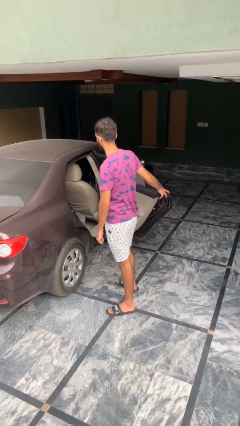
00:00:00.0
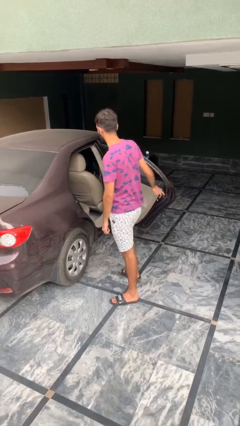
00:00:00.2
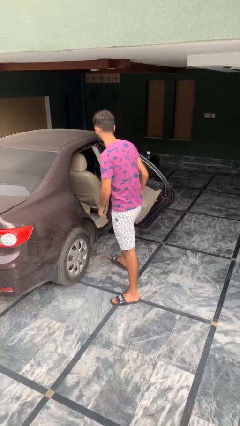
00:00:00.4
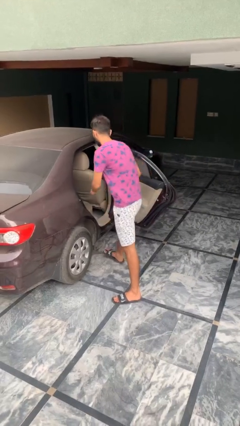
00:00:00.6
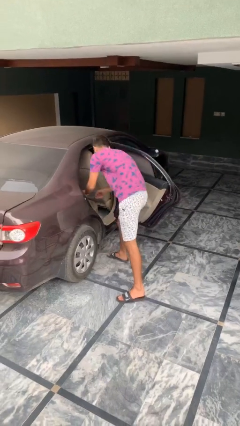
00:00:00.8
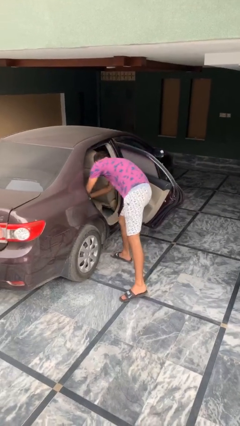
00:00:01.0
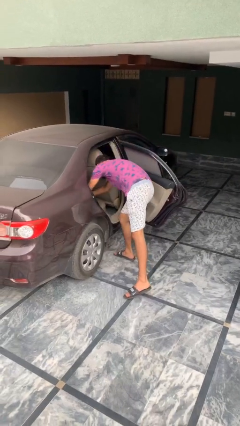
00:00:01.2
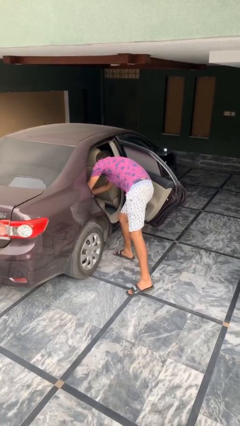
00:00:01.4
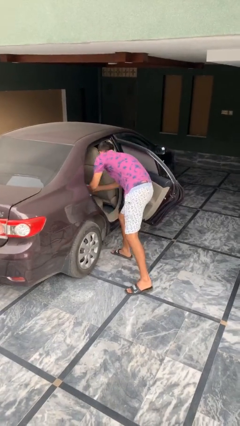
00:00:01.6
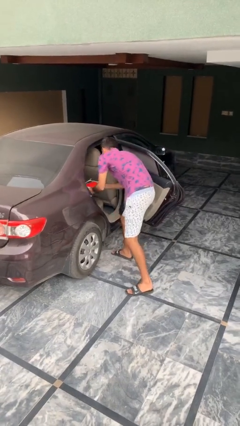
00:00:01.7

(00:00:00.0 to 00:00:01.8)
person unloads car

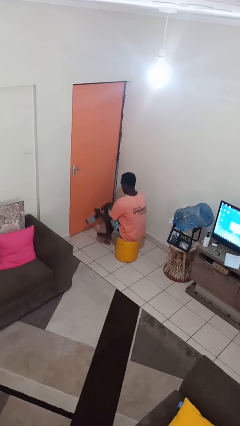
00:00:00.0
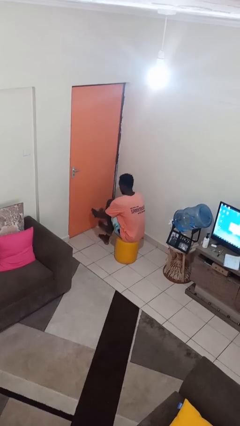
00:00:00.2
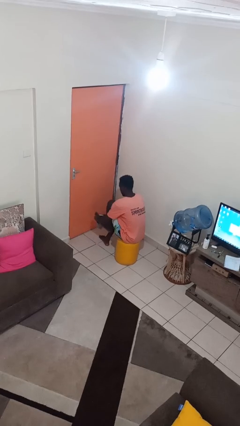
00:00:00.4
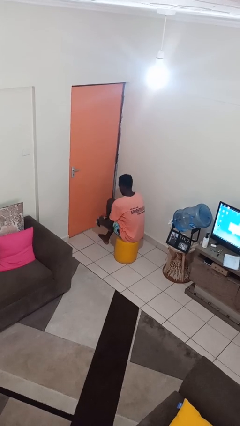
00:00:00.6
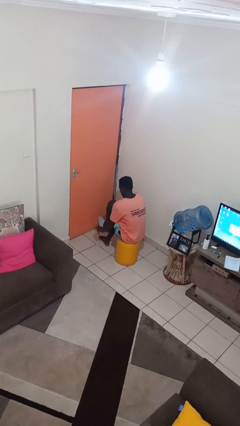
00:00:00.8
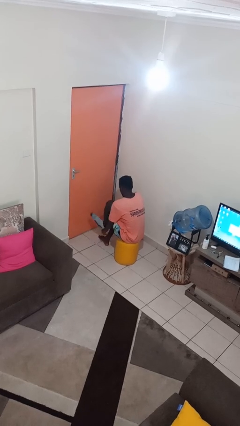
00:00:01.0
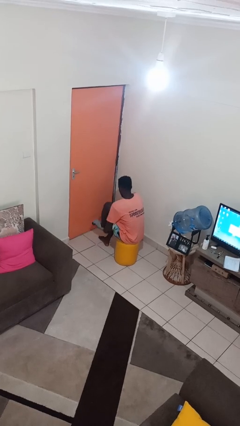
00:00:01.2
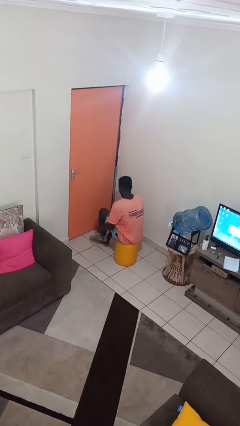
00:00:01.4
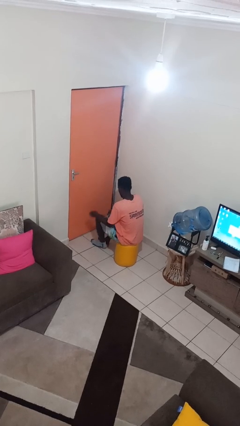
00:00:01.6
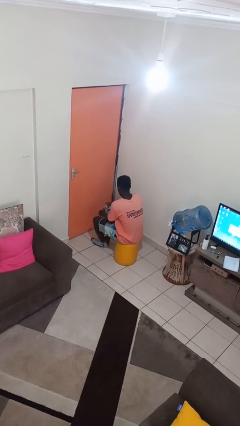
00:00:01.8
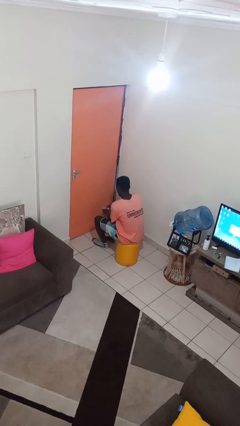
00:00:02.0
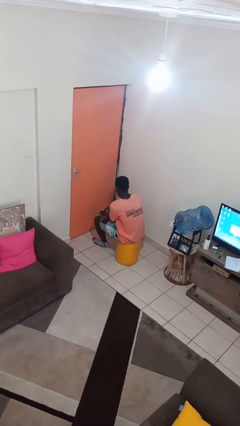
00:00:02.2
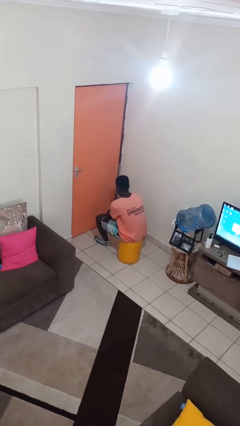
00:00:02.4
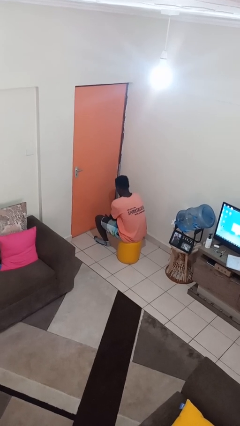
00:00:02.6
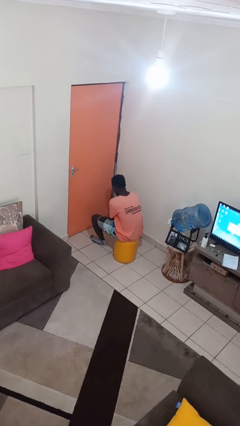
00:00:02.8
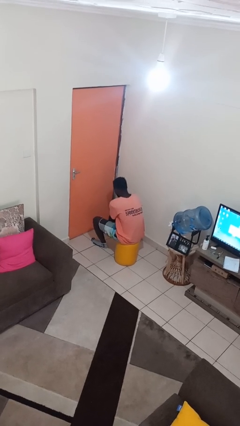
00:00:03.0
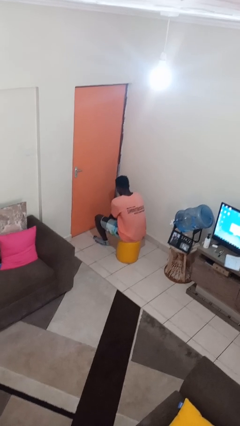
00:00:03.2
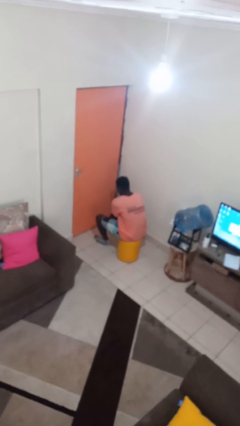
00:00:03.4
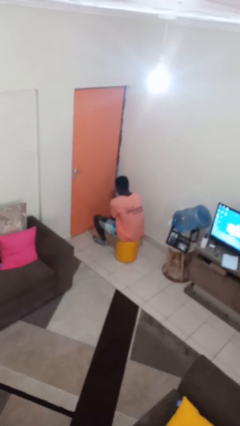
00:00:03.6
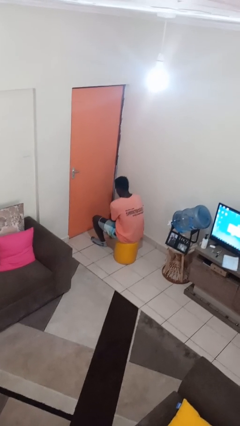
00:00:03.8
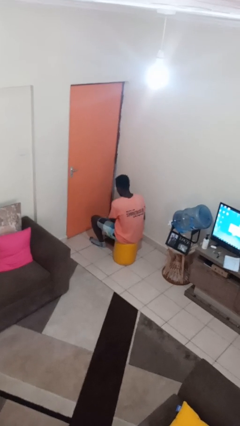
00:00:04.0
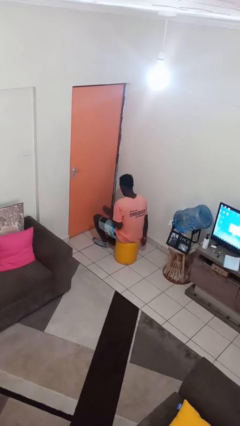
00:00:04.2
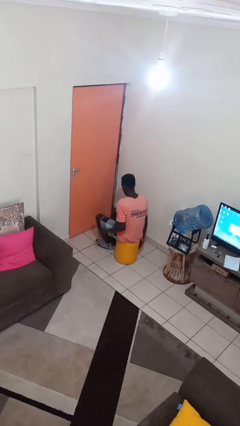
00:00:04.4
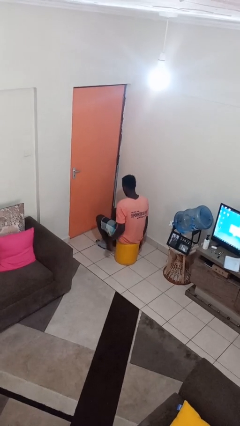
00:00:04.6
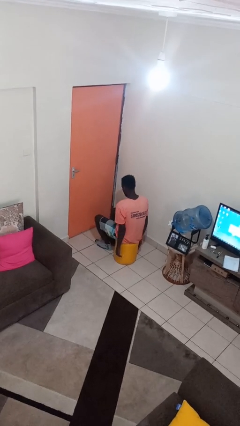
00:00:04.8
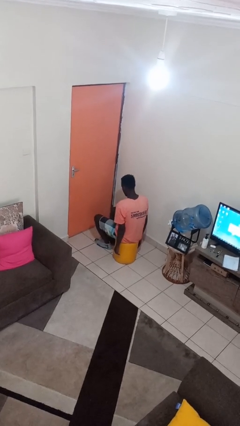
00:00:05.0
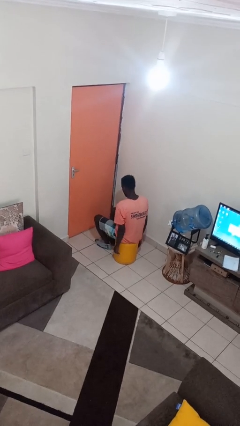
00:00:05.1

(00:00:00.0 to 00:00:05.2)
person puts on socks

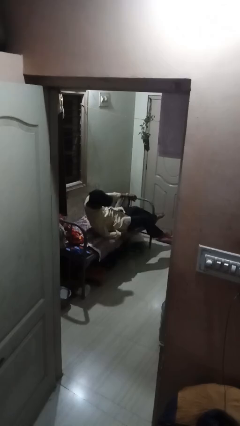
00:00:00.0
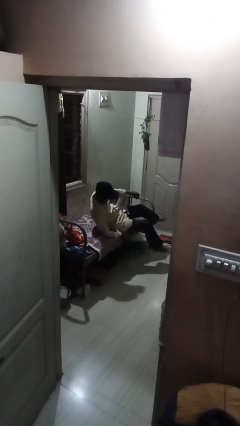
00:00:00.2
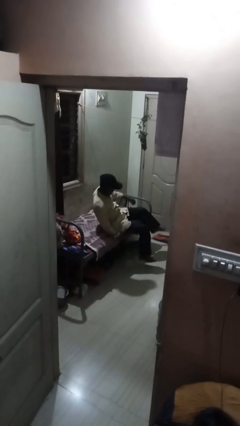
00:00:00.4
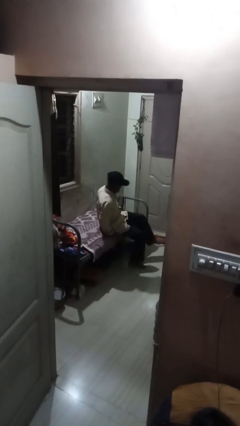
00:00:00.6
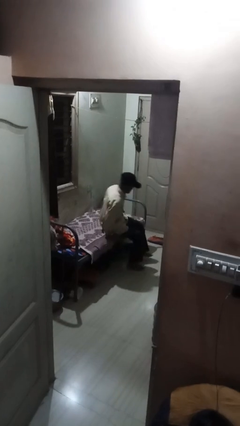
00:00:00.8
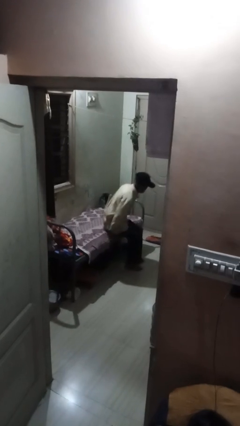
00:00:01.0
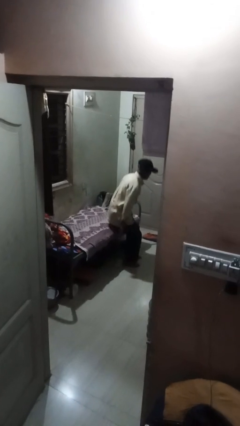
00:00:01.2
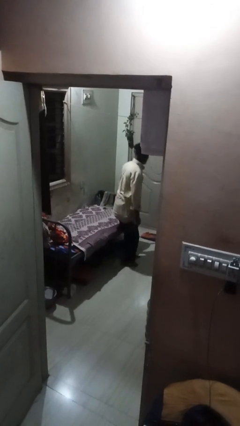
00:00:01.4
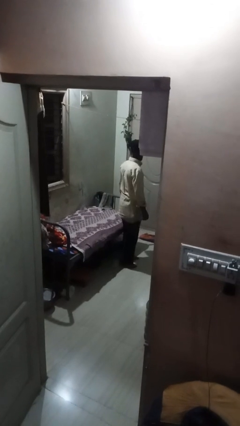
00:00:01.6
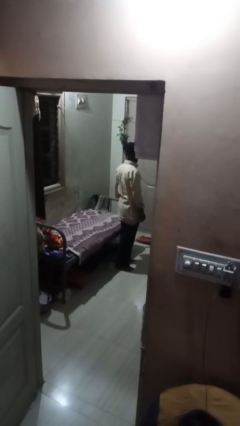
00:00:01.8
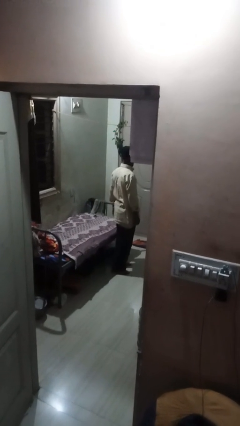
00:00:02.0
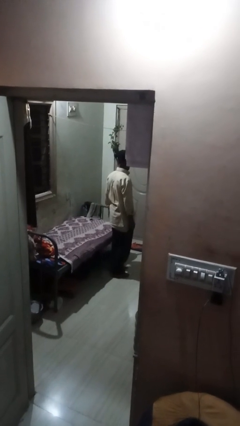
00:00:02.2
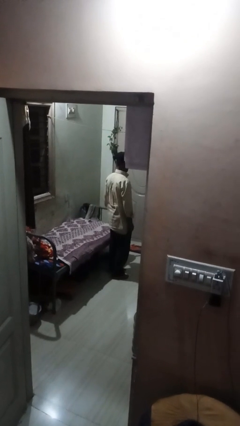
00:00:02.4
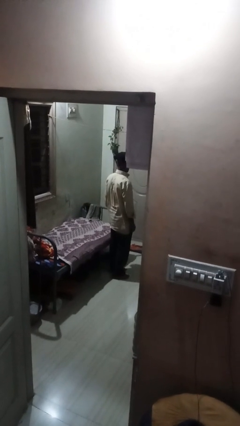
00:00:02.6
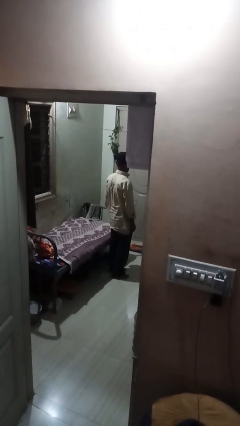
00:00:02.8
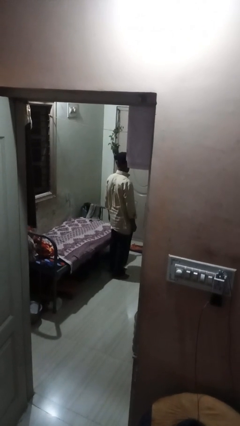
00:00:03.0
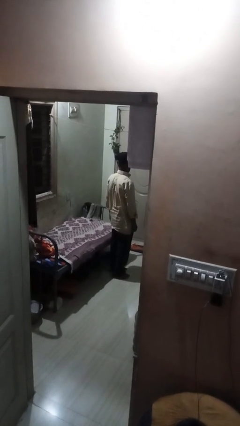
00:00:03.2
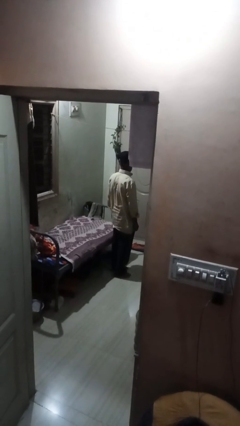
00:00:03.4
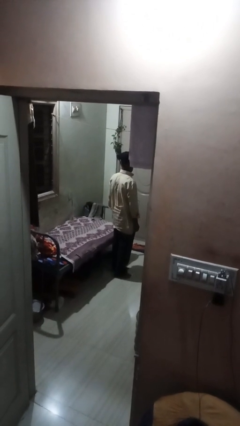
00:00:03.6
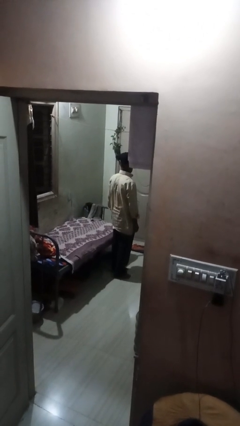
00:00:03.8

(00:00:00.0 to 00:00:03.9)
person stands up

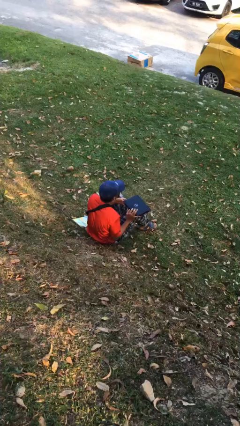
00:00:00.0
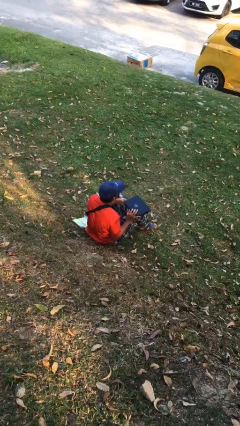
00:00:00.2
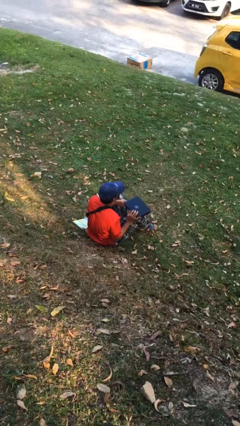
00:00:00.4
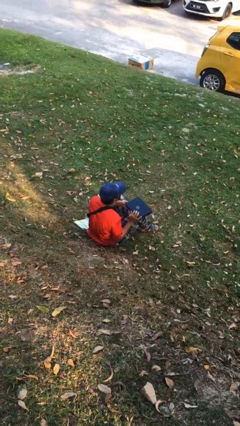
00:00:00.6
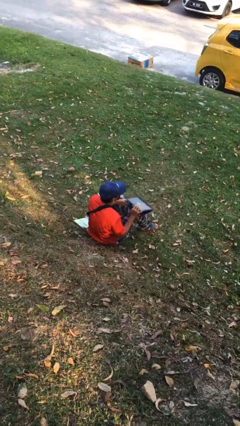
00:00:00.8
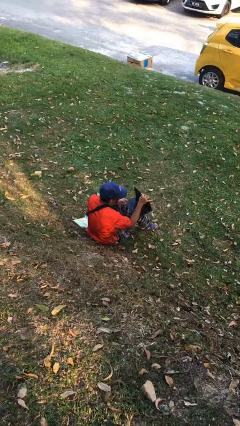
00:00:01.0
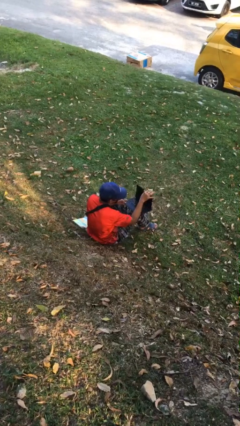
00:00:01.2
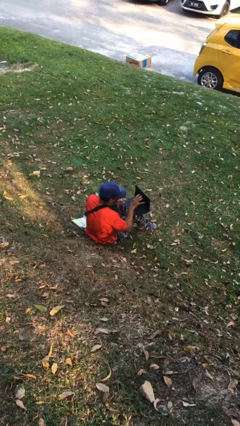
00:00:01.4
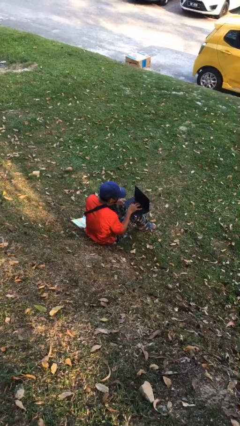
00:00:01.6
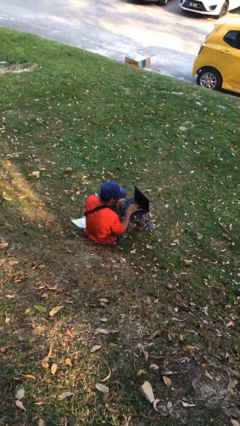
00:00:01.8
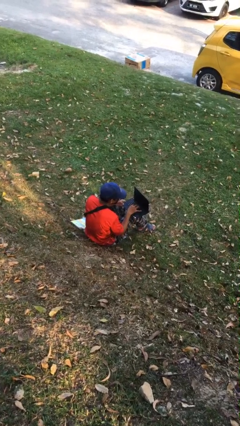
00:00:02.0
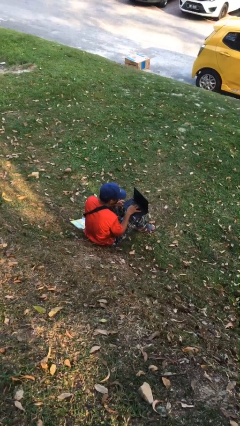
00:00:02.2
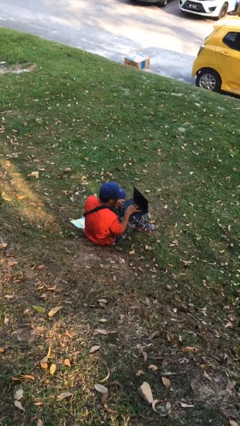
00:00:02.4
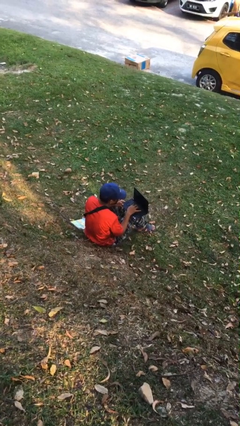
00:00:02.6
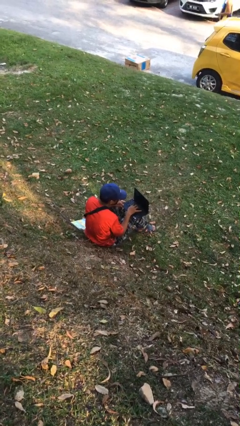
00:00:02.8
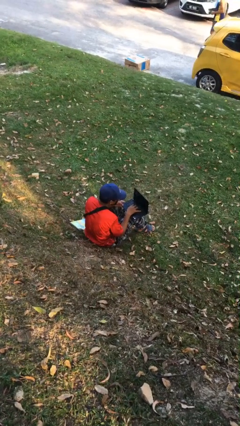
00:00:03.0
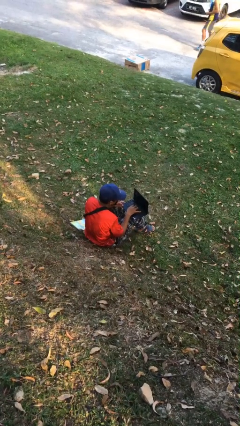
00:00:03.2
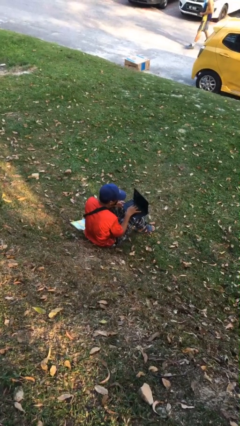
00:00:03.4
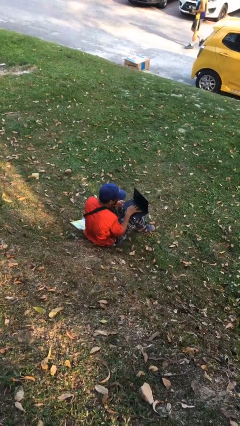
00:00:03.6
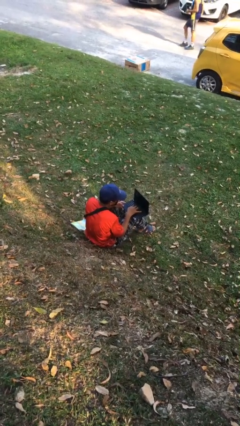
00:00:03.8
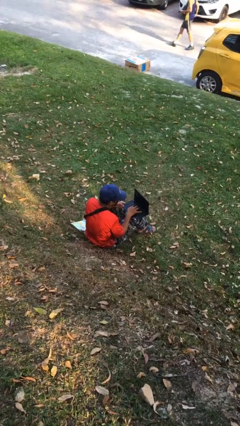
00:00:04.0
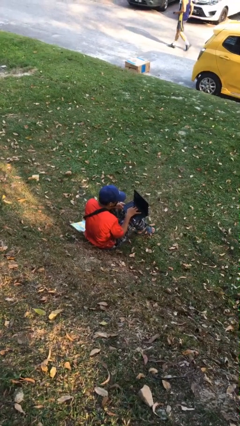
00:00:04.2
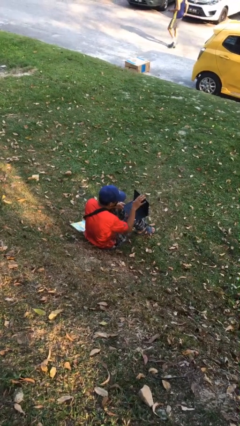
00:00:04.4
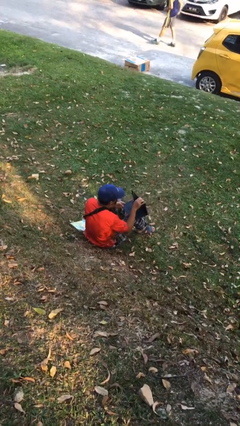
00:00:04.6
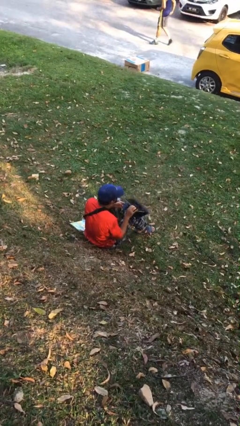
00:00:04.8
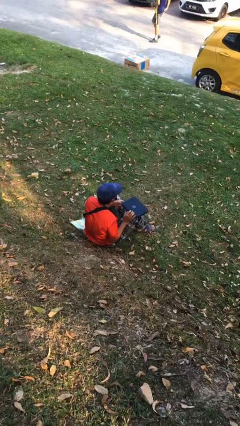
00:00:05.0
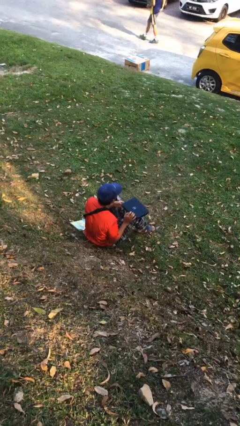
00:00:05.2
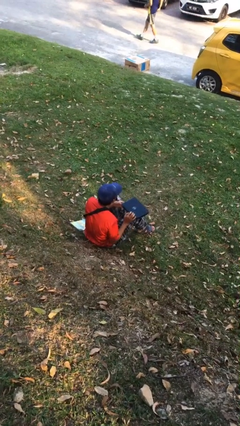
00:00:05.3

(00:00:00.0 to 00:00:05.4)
person interacts with laptop

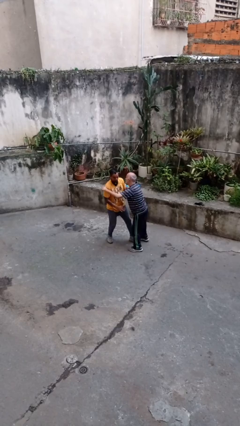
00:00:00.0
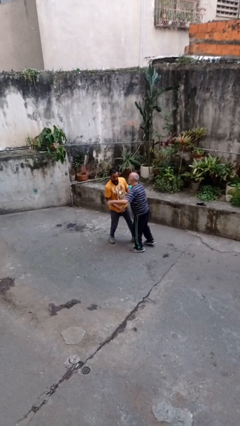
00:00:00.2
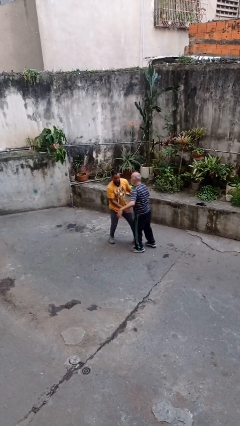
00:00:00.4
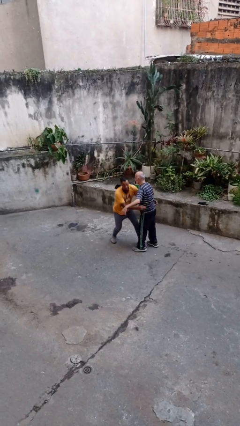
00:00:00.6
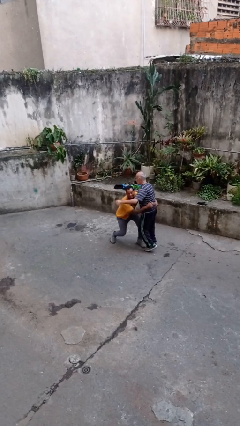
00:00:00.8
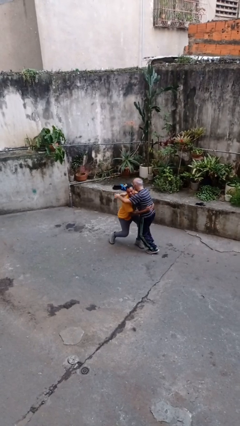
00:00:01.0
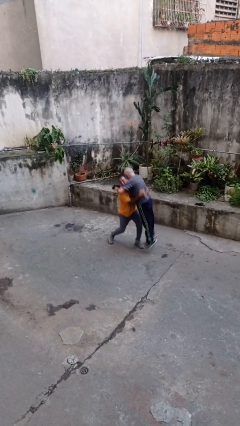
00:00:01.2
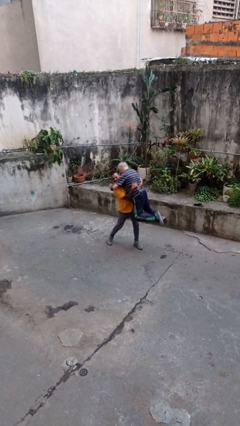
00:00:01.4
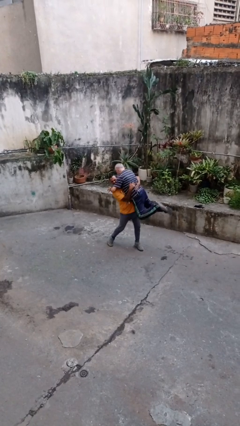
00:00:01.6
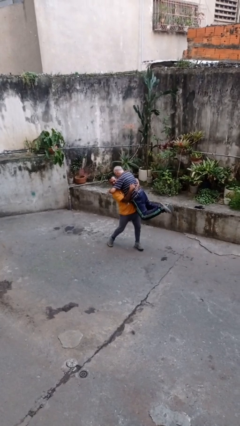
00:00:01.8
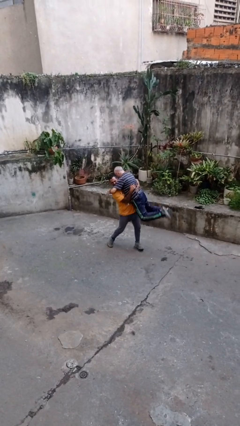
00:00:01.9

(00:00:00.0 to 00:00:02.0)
person picks up person
